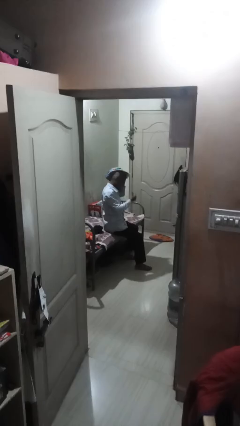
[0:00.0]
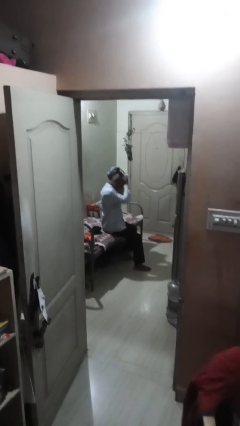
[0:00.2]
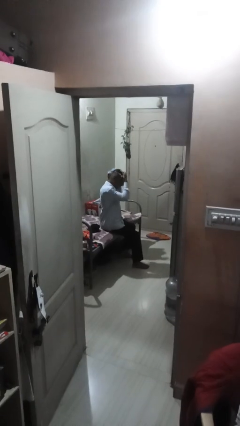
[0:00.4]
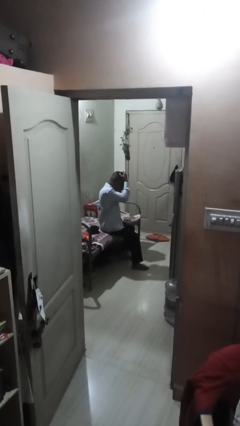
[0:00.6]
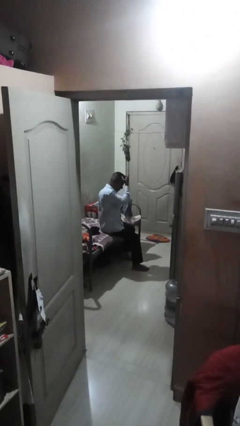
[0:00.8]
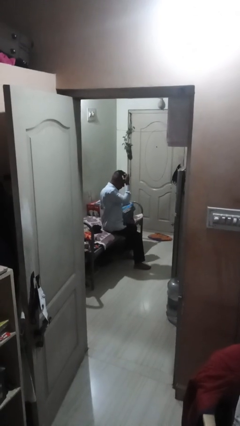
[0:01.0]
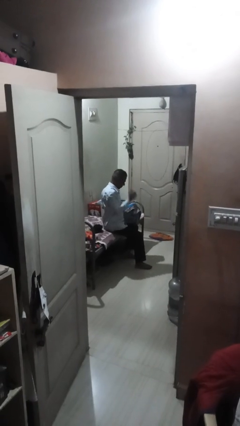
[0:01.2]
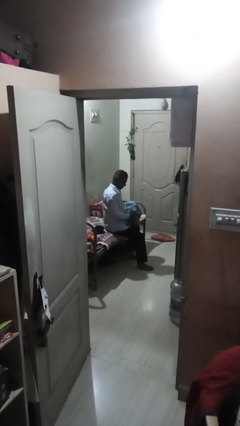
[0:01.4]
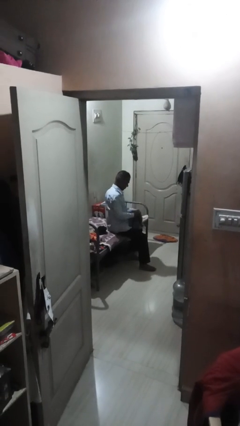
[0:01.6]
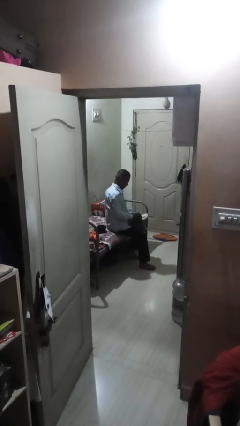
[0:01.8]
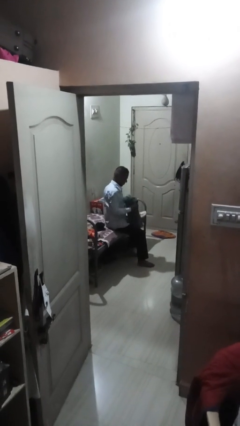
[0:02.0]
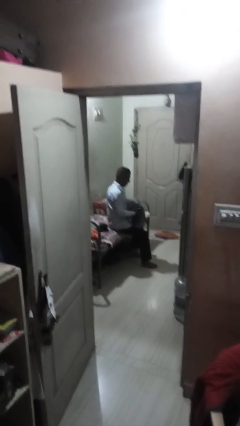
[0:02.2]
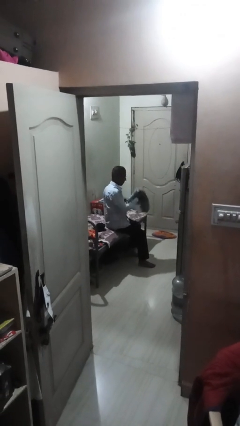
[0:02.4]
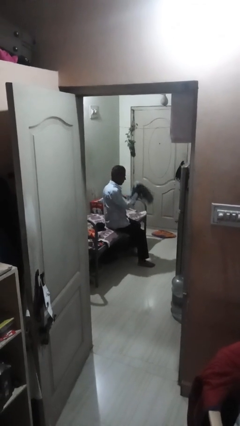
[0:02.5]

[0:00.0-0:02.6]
person gestures listen closely

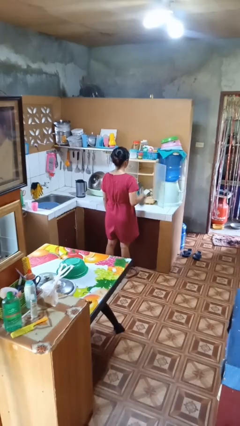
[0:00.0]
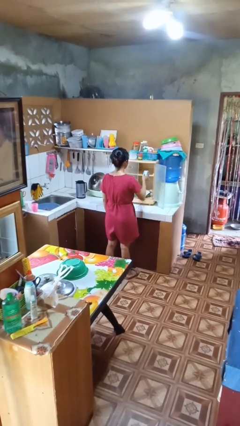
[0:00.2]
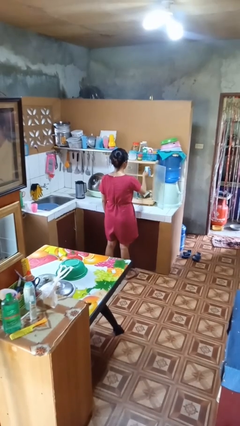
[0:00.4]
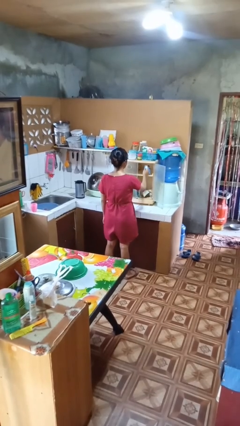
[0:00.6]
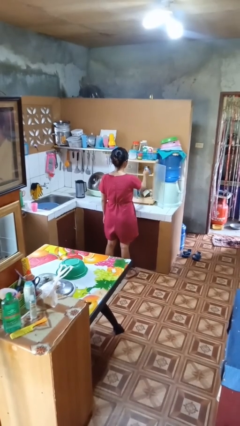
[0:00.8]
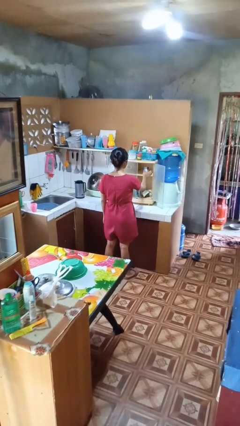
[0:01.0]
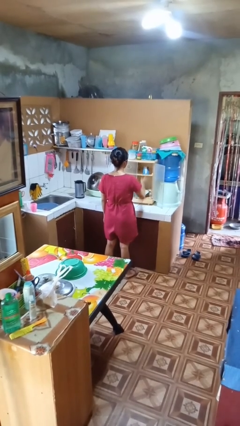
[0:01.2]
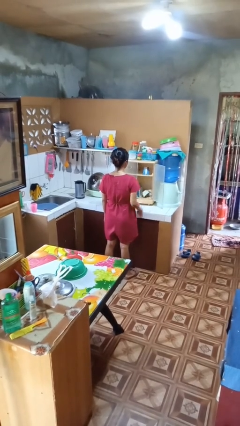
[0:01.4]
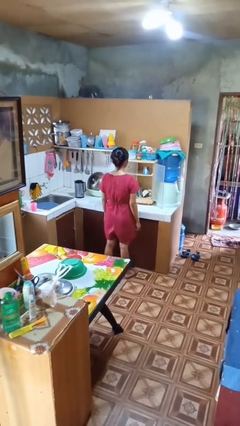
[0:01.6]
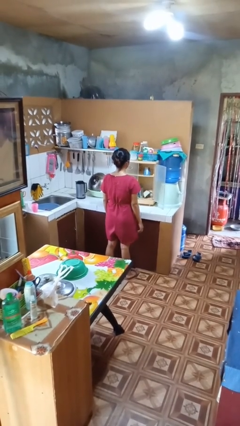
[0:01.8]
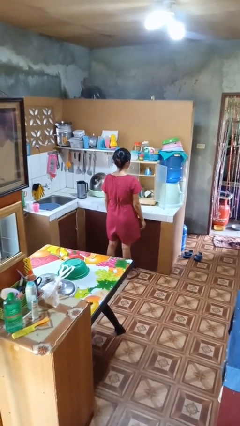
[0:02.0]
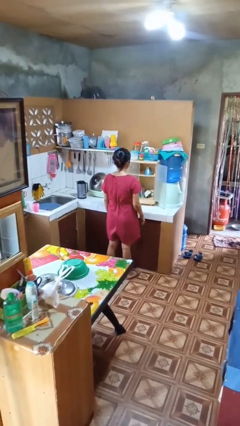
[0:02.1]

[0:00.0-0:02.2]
person puts object in cabinet

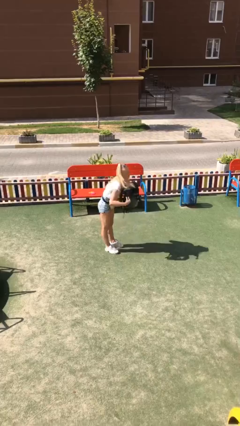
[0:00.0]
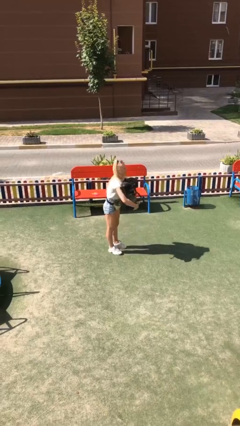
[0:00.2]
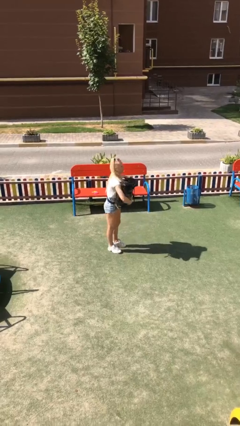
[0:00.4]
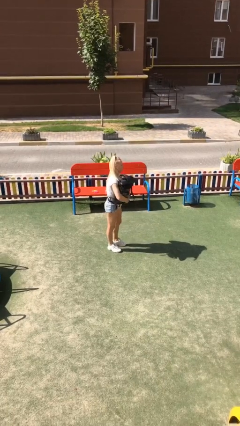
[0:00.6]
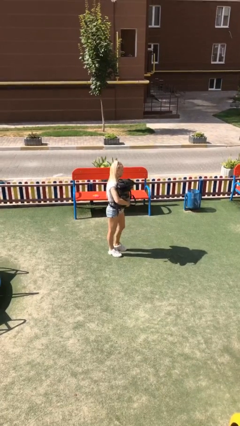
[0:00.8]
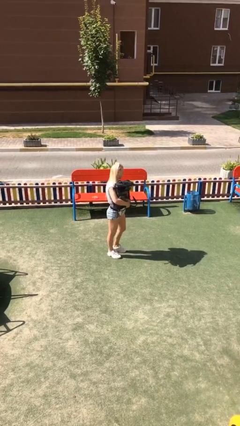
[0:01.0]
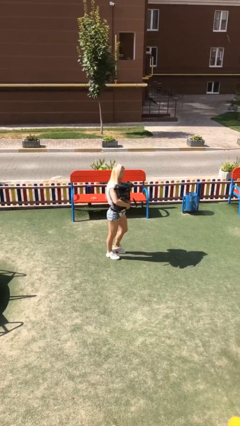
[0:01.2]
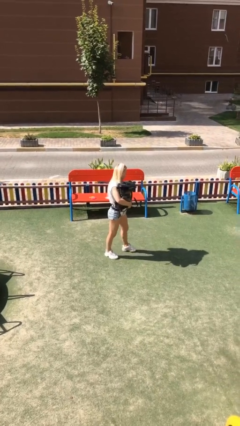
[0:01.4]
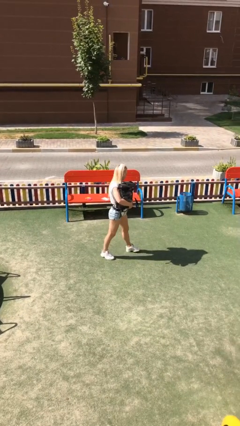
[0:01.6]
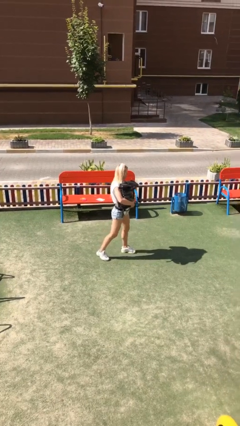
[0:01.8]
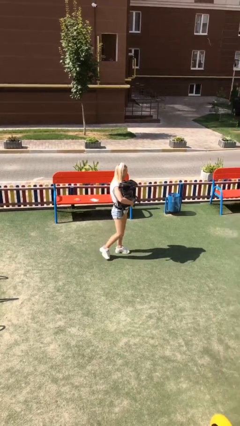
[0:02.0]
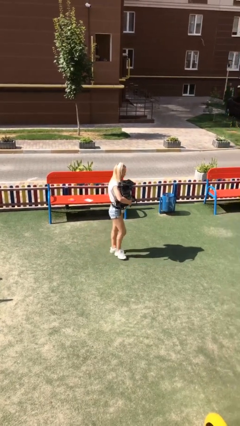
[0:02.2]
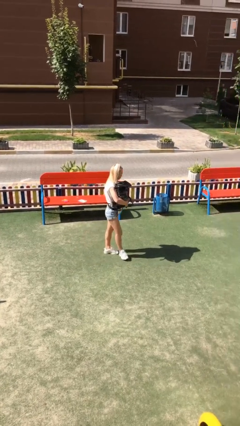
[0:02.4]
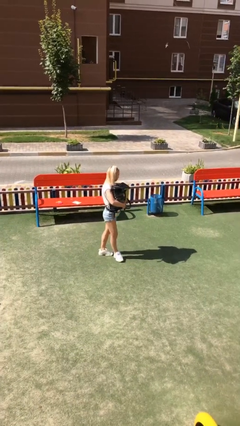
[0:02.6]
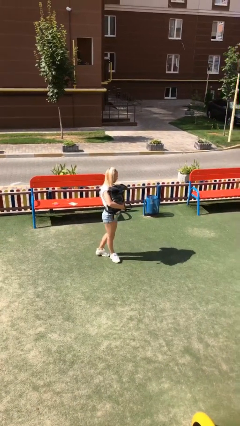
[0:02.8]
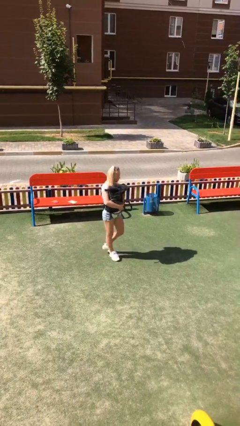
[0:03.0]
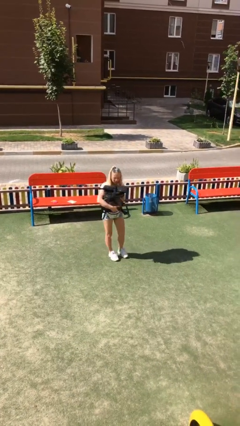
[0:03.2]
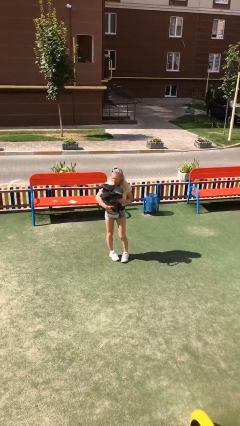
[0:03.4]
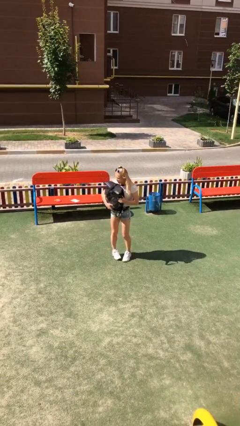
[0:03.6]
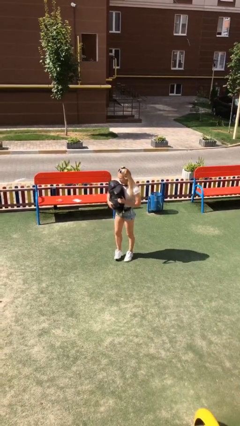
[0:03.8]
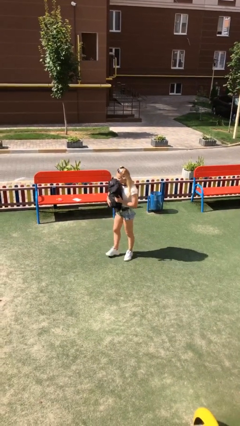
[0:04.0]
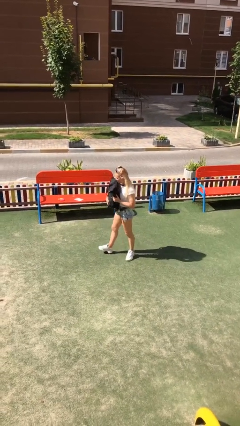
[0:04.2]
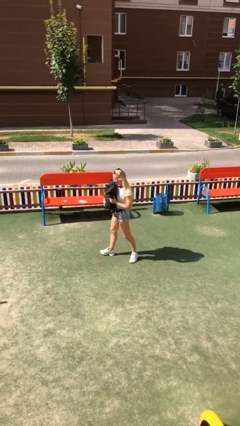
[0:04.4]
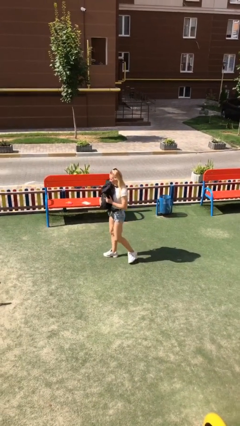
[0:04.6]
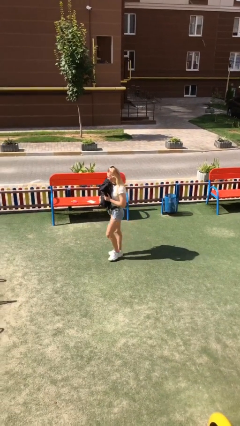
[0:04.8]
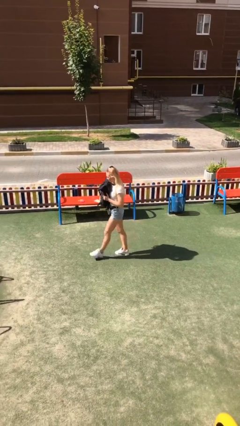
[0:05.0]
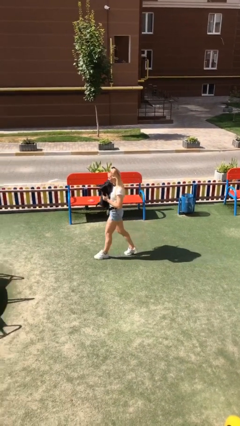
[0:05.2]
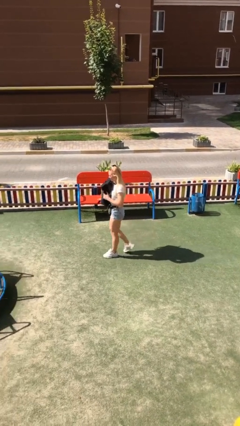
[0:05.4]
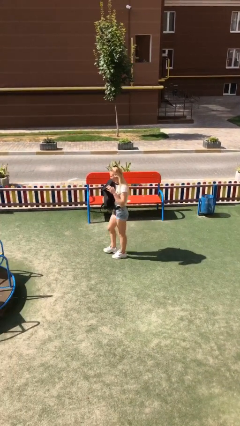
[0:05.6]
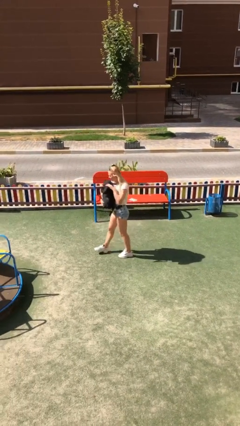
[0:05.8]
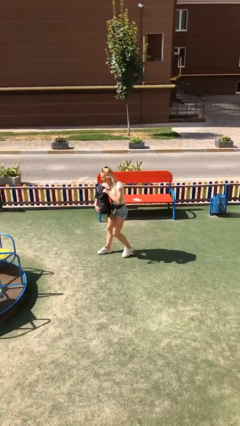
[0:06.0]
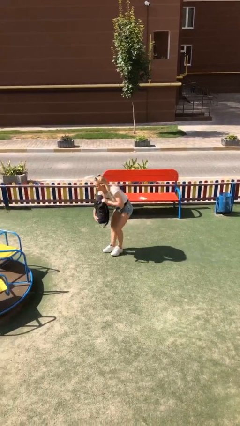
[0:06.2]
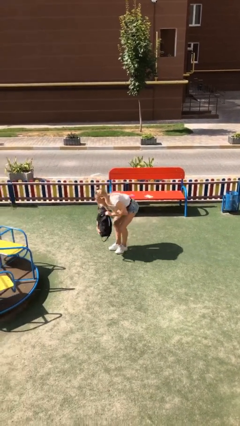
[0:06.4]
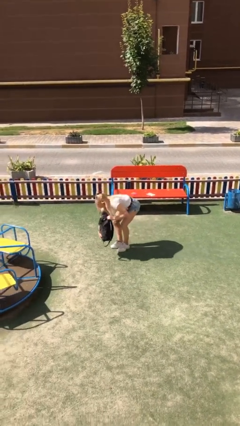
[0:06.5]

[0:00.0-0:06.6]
person carries heavy object

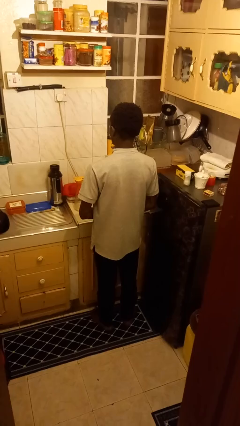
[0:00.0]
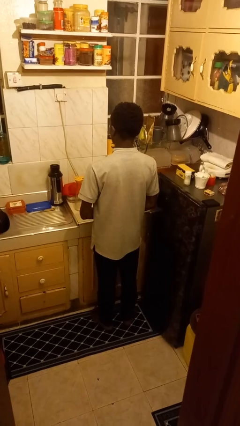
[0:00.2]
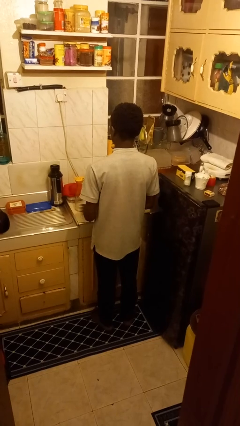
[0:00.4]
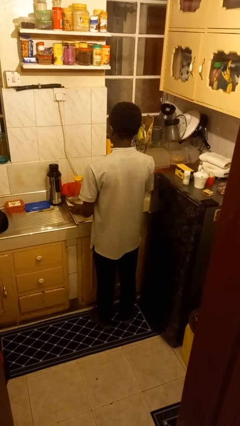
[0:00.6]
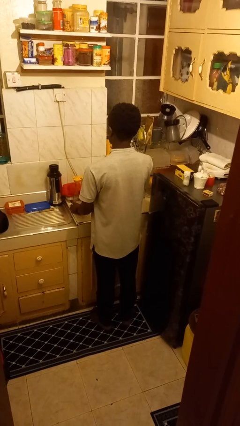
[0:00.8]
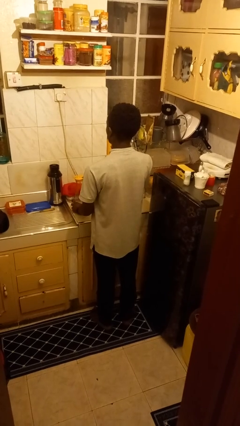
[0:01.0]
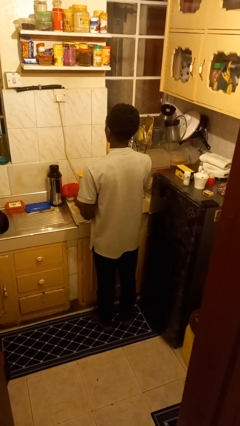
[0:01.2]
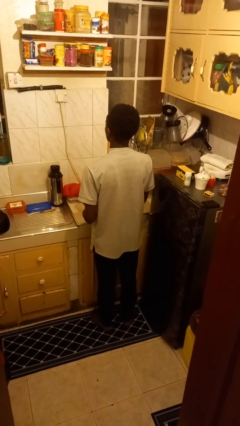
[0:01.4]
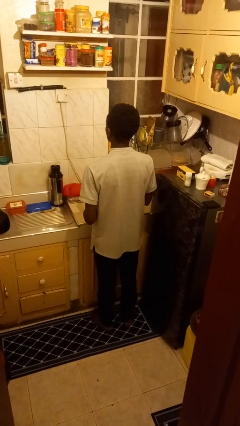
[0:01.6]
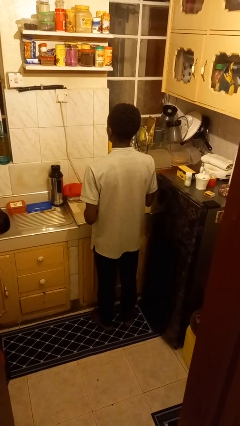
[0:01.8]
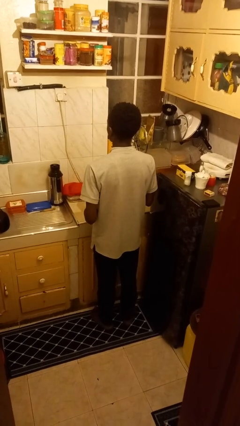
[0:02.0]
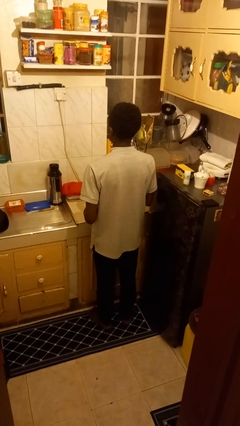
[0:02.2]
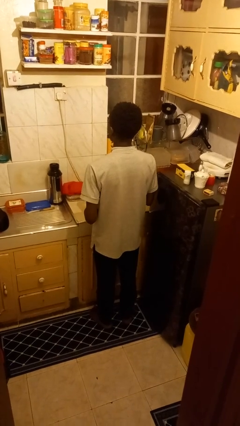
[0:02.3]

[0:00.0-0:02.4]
person picks up object from countertop

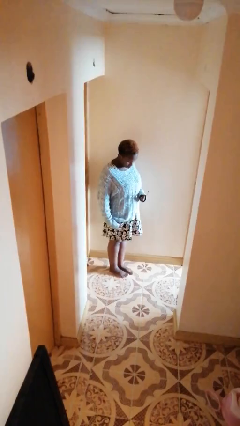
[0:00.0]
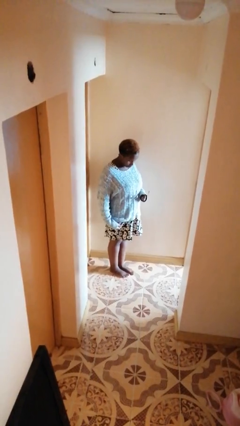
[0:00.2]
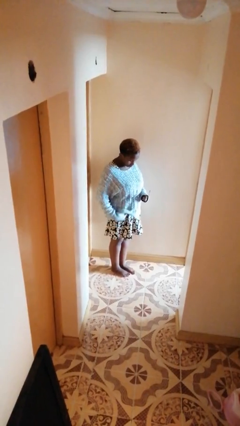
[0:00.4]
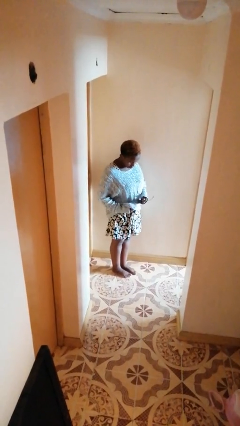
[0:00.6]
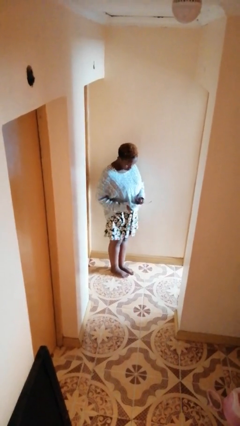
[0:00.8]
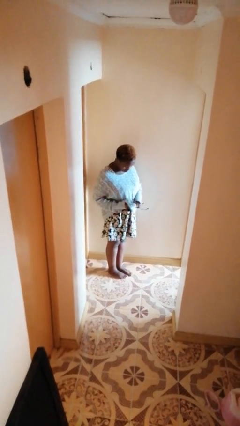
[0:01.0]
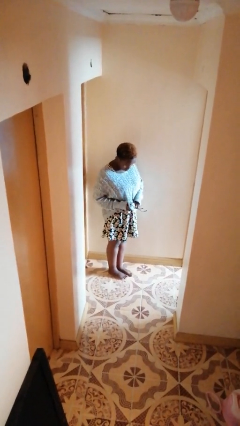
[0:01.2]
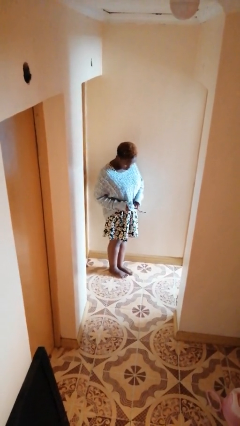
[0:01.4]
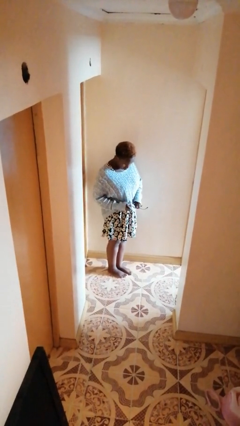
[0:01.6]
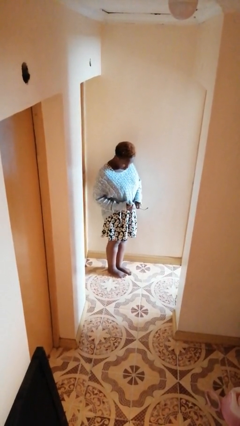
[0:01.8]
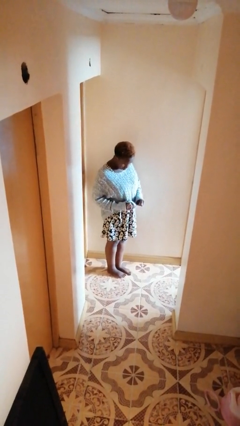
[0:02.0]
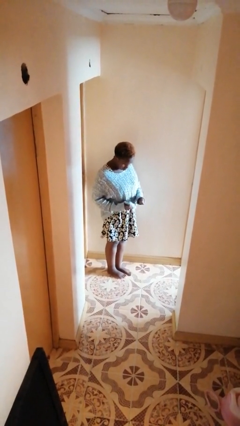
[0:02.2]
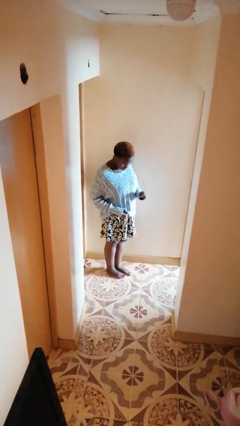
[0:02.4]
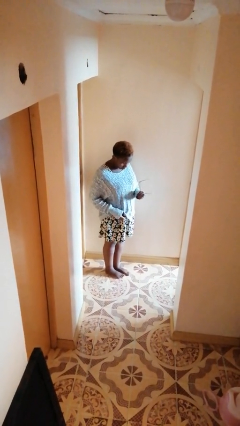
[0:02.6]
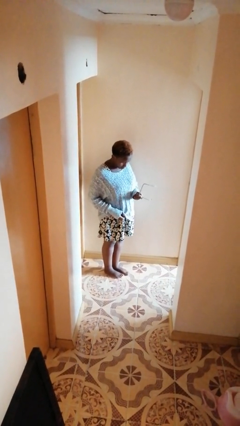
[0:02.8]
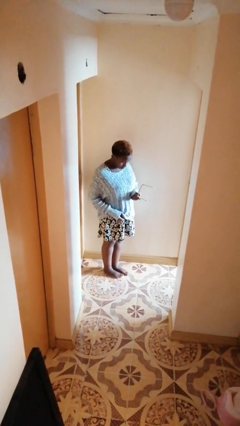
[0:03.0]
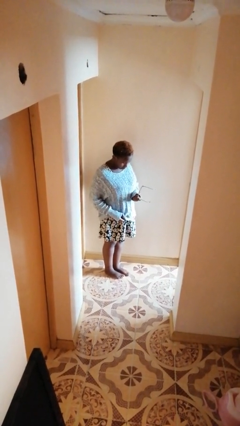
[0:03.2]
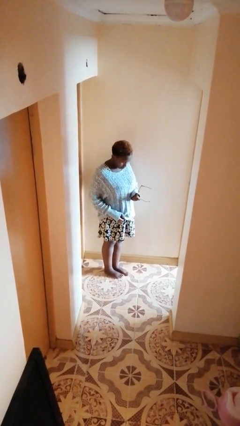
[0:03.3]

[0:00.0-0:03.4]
person cleans eyeglasses

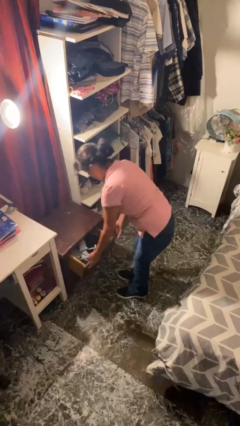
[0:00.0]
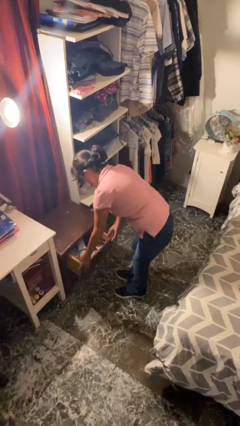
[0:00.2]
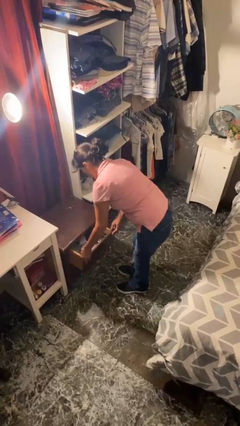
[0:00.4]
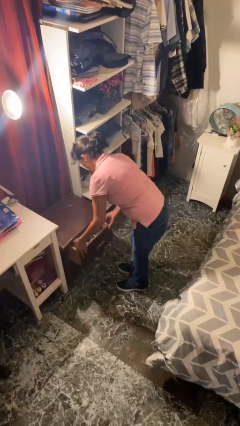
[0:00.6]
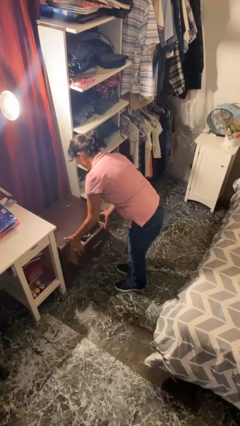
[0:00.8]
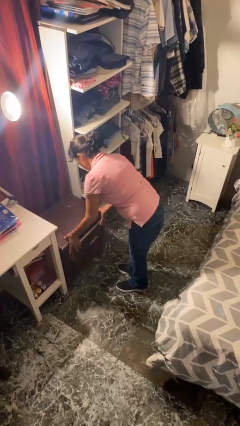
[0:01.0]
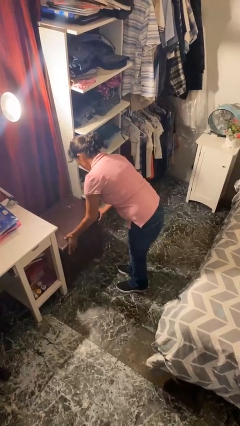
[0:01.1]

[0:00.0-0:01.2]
person closes dresser drawer
